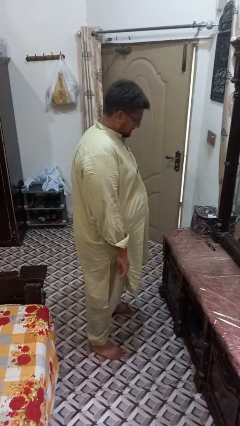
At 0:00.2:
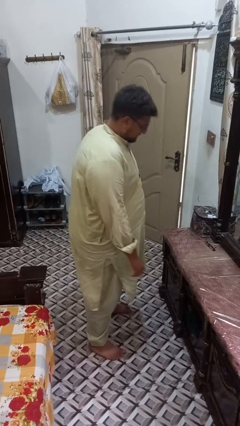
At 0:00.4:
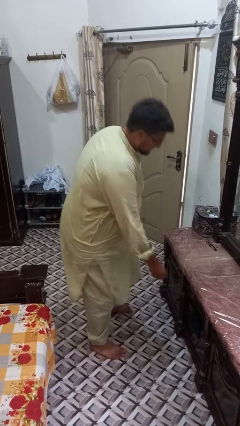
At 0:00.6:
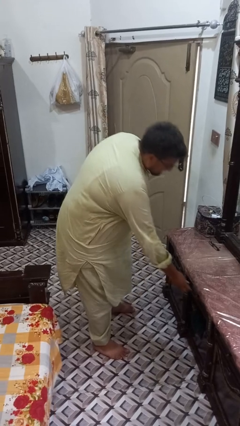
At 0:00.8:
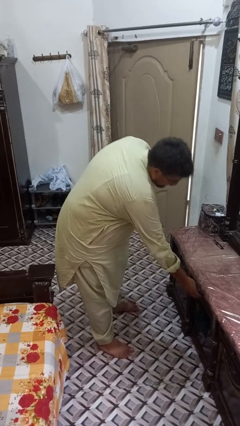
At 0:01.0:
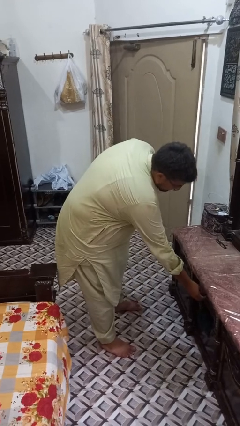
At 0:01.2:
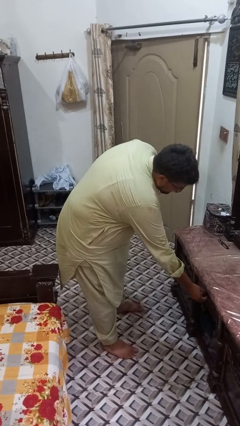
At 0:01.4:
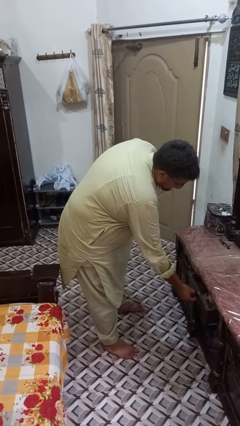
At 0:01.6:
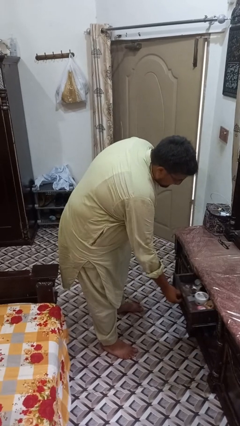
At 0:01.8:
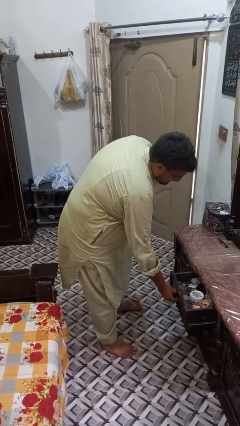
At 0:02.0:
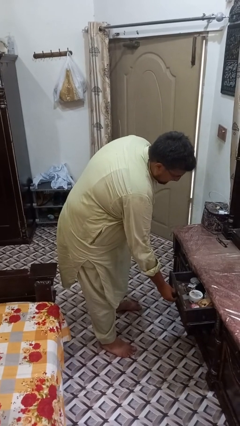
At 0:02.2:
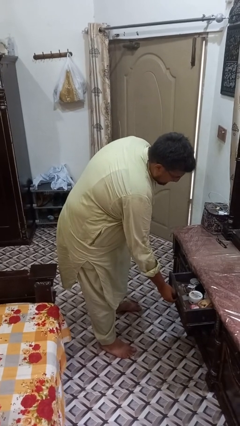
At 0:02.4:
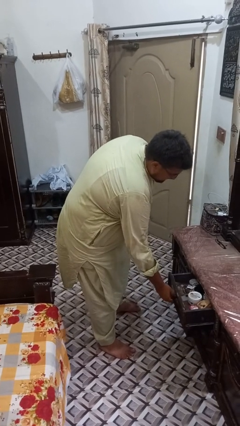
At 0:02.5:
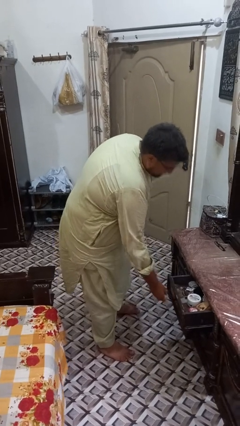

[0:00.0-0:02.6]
person opens dresser drawer

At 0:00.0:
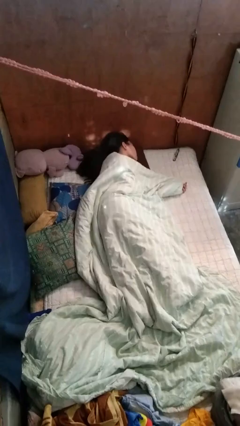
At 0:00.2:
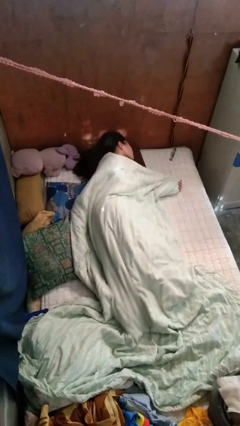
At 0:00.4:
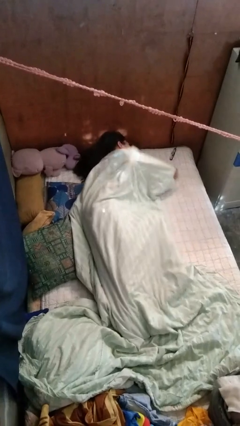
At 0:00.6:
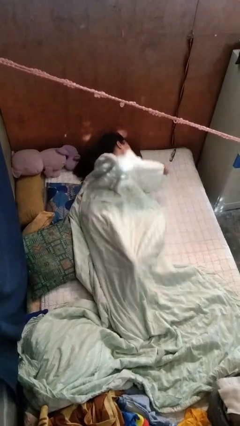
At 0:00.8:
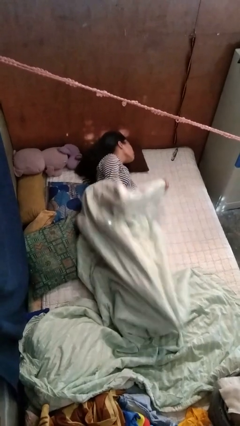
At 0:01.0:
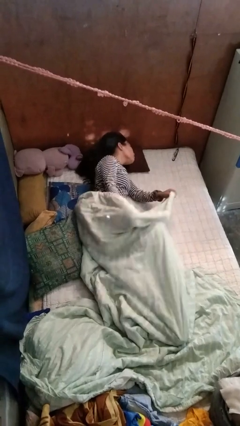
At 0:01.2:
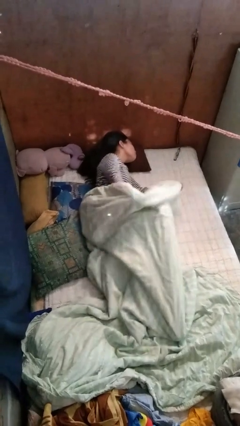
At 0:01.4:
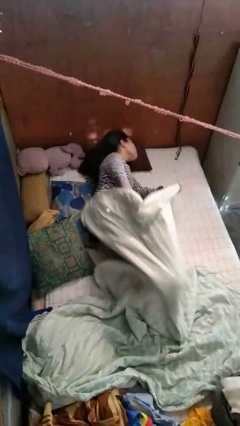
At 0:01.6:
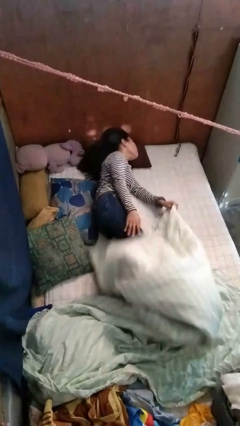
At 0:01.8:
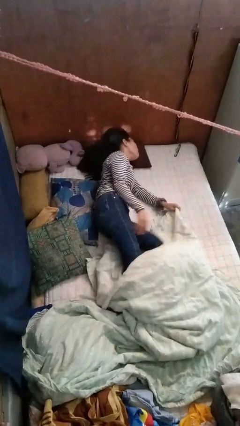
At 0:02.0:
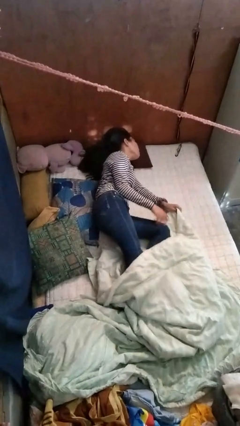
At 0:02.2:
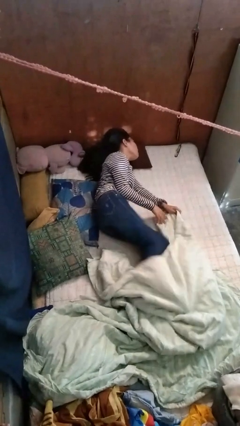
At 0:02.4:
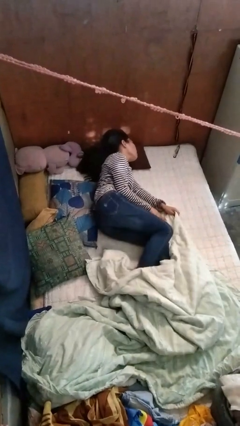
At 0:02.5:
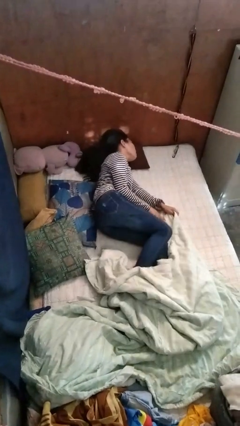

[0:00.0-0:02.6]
person uncovers with bedsheets

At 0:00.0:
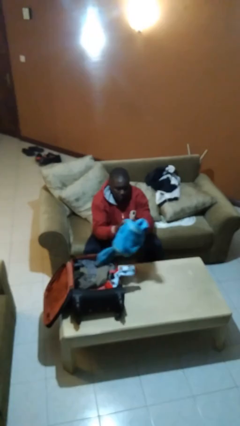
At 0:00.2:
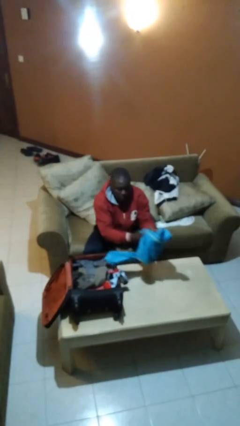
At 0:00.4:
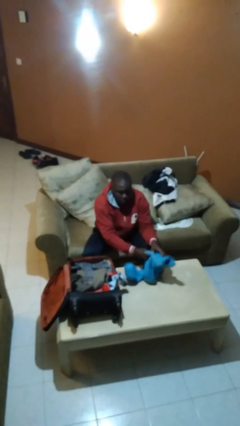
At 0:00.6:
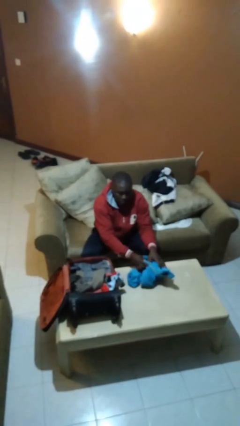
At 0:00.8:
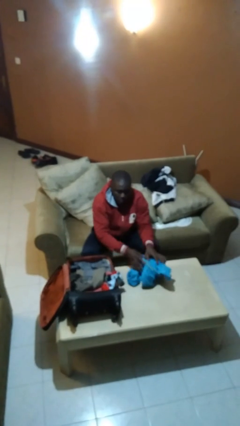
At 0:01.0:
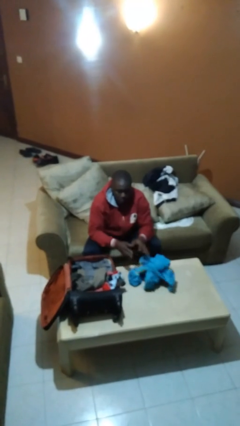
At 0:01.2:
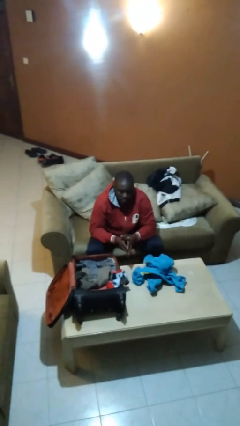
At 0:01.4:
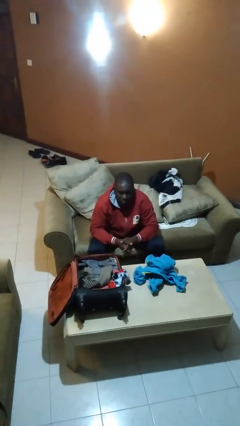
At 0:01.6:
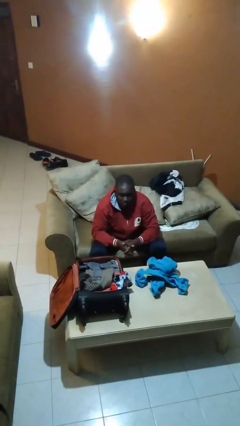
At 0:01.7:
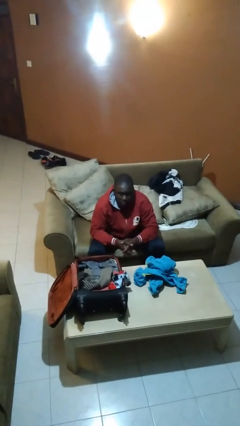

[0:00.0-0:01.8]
person unloads clothes from suitcase

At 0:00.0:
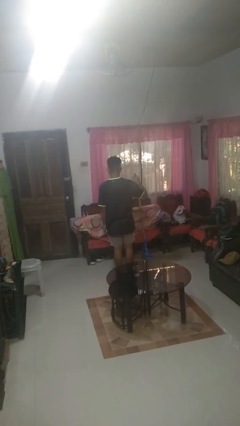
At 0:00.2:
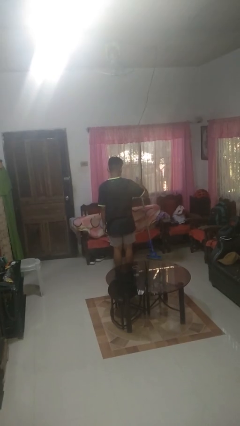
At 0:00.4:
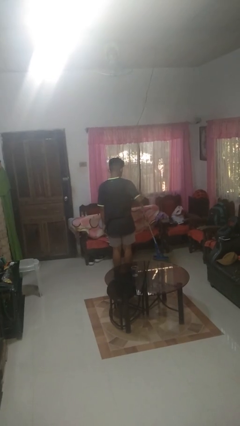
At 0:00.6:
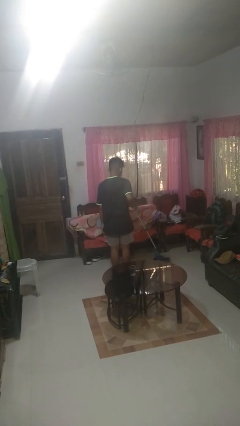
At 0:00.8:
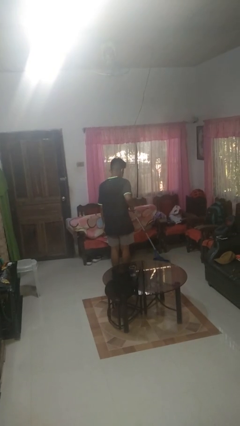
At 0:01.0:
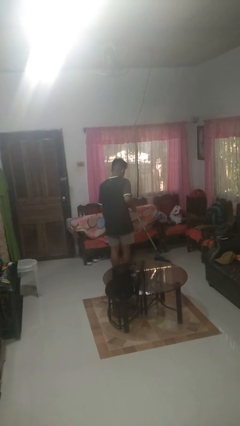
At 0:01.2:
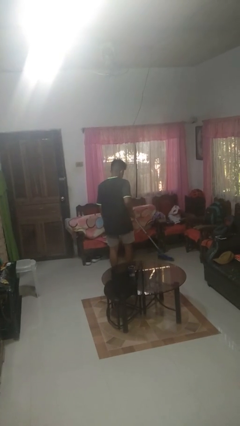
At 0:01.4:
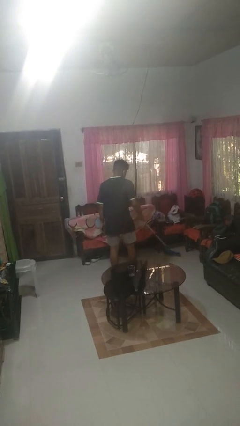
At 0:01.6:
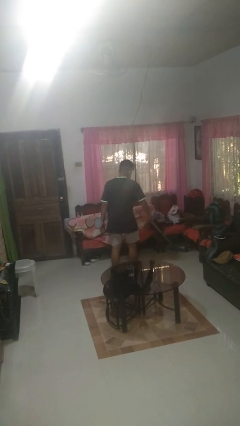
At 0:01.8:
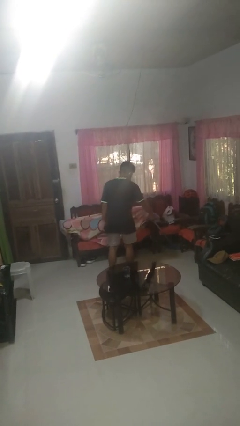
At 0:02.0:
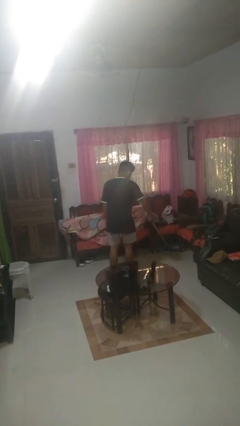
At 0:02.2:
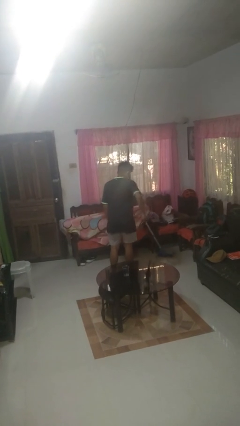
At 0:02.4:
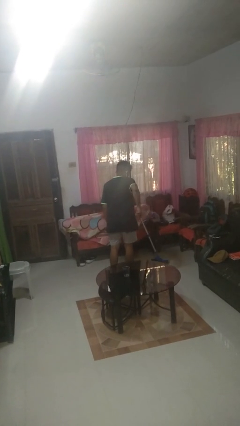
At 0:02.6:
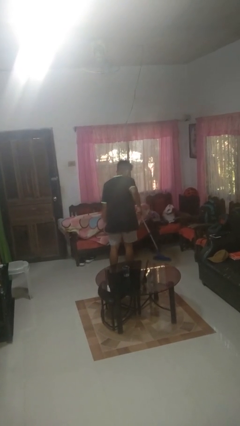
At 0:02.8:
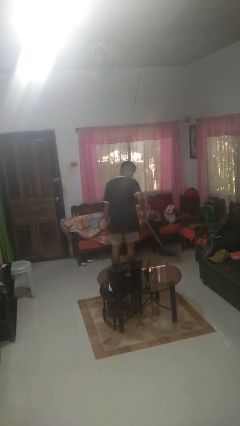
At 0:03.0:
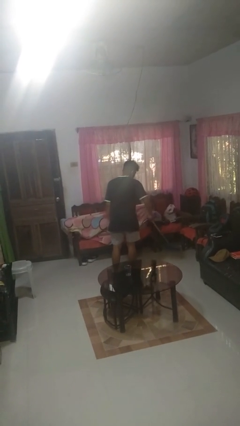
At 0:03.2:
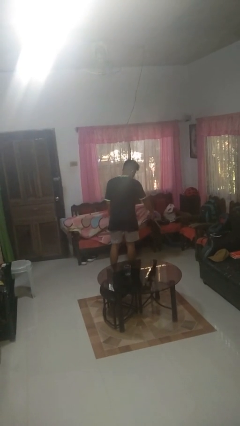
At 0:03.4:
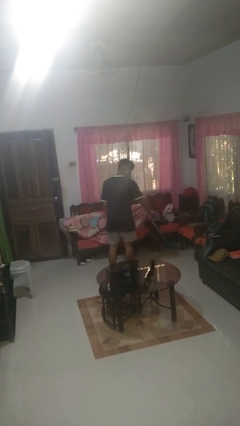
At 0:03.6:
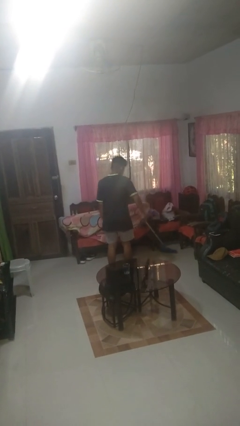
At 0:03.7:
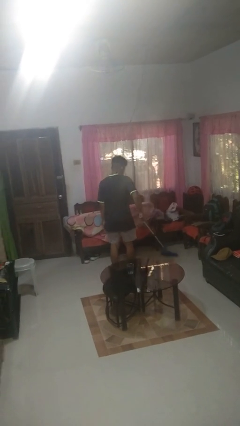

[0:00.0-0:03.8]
person mops

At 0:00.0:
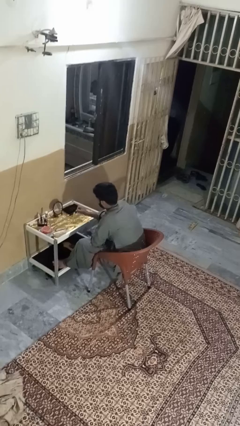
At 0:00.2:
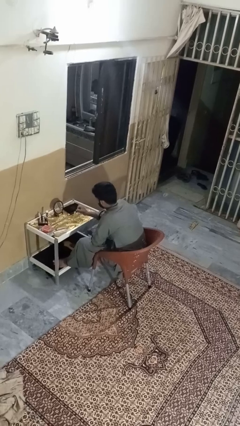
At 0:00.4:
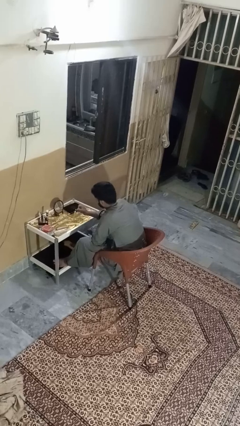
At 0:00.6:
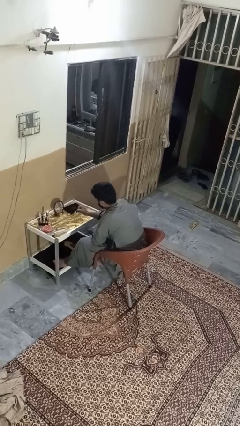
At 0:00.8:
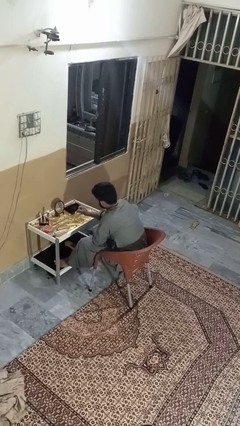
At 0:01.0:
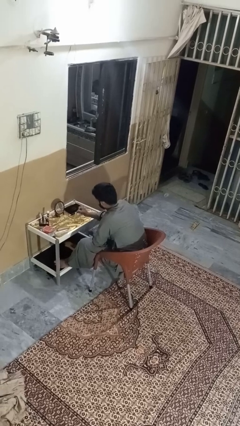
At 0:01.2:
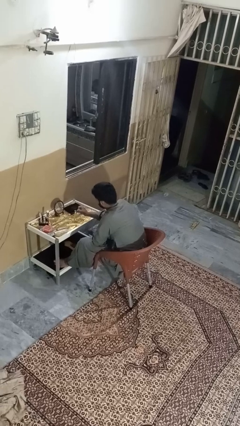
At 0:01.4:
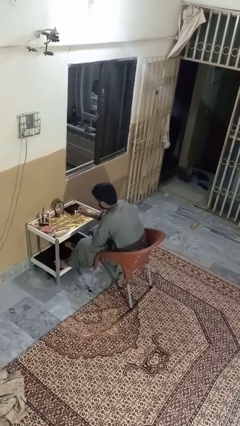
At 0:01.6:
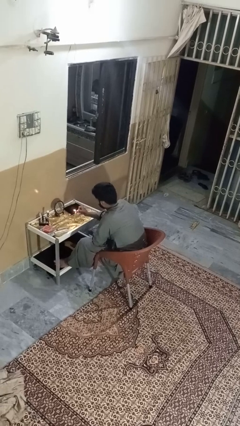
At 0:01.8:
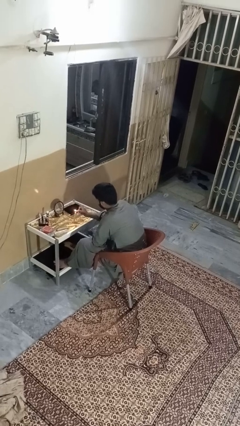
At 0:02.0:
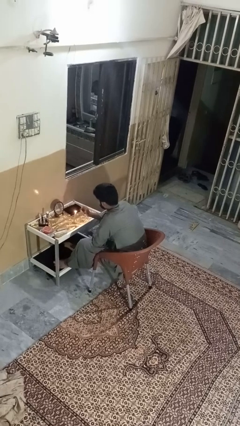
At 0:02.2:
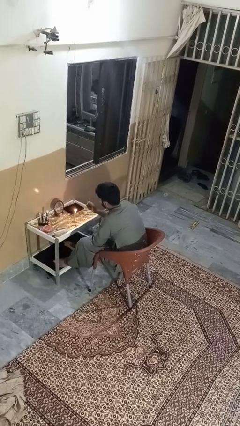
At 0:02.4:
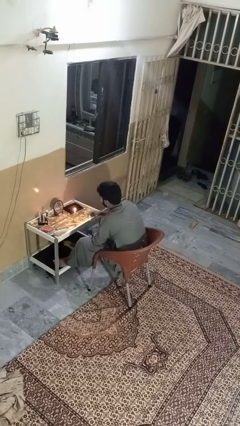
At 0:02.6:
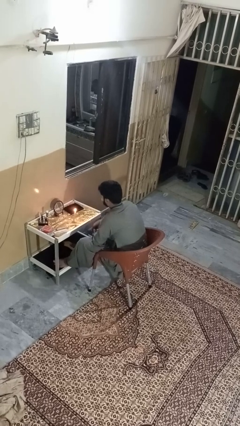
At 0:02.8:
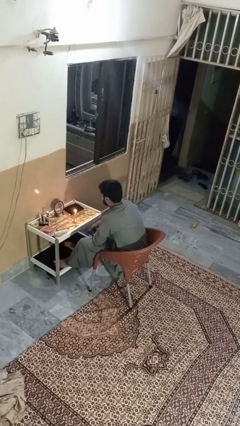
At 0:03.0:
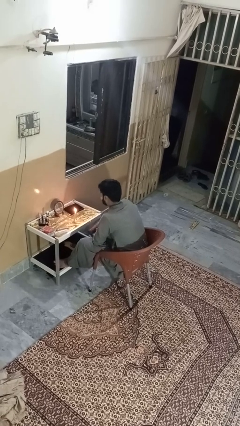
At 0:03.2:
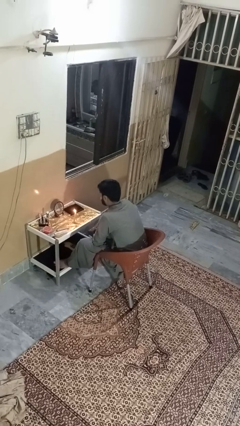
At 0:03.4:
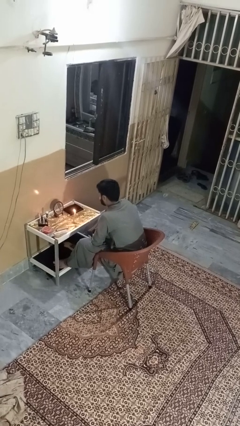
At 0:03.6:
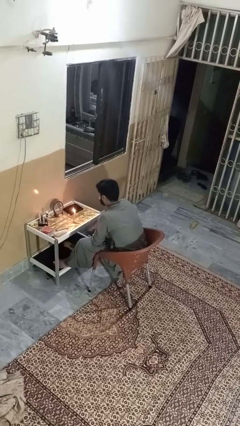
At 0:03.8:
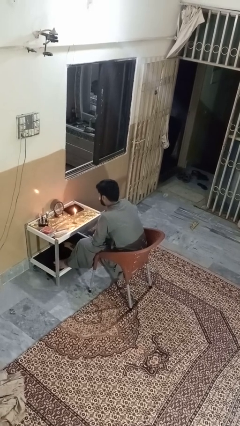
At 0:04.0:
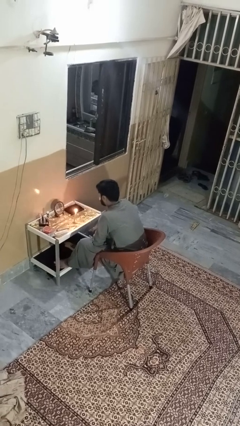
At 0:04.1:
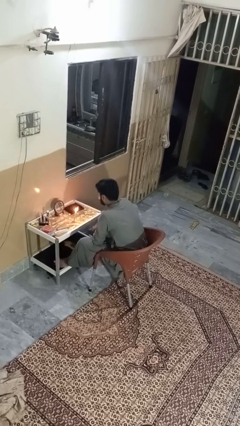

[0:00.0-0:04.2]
person lights candle

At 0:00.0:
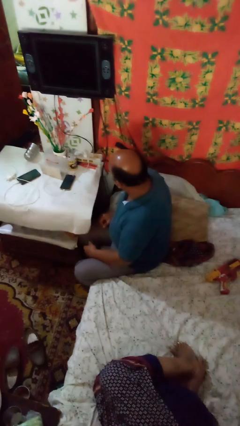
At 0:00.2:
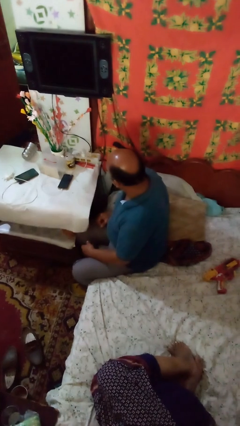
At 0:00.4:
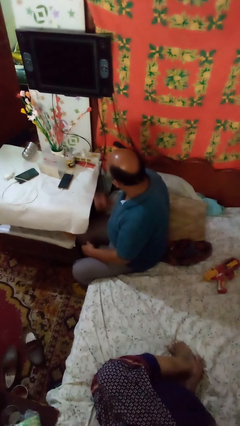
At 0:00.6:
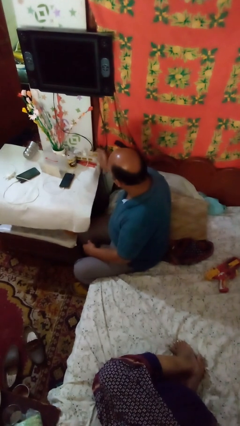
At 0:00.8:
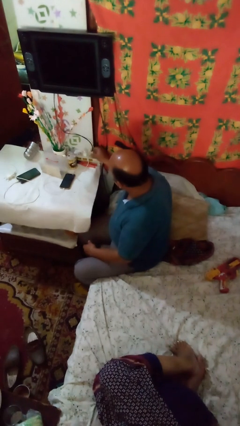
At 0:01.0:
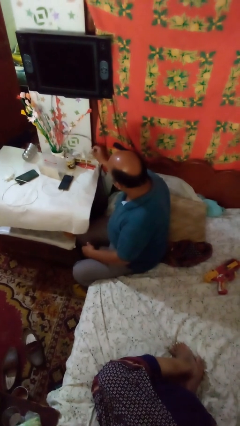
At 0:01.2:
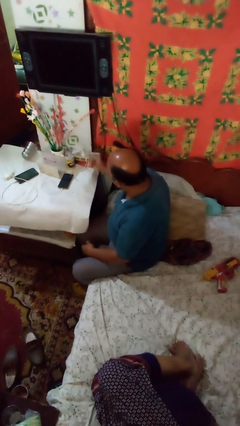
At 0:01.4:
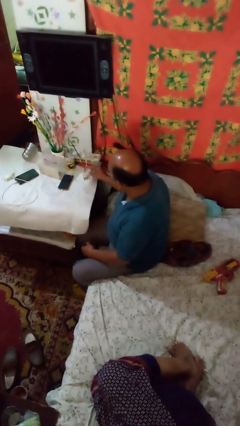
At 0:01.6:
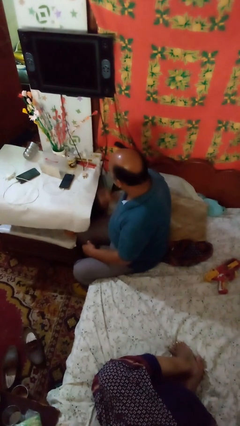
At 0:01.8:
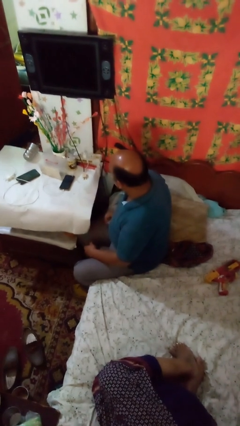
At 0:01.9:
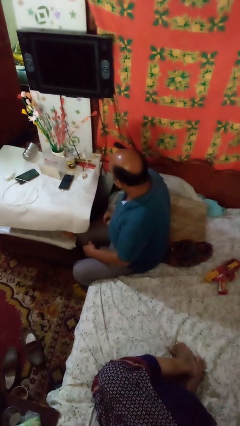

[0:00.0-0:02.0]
person unplugs from electrical socket
